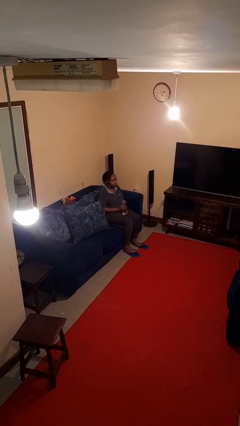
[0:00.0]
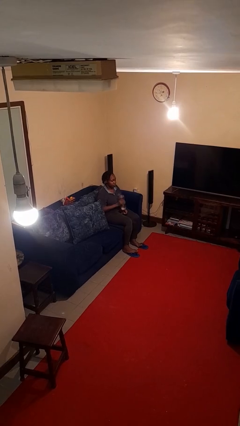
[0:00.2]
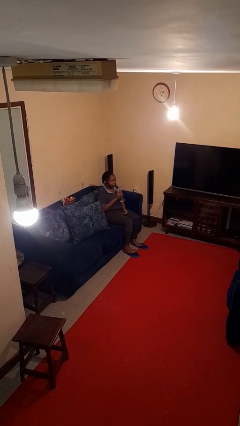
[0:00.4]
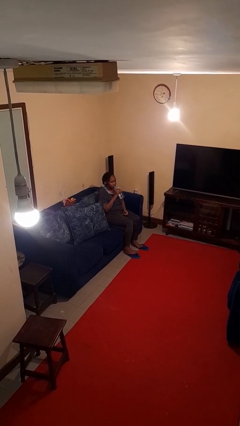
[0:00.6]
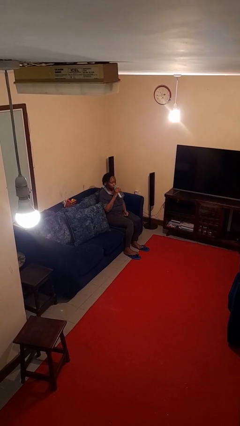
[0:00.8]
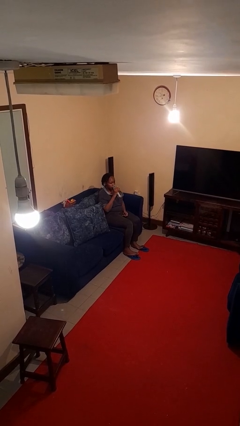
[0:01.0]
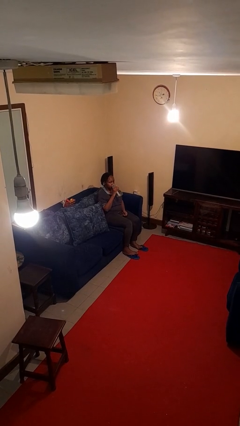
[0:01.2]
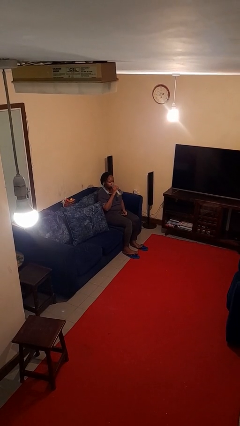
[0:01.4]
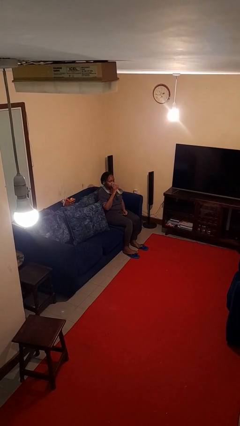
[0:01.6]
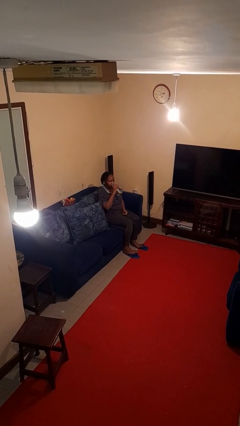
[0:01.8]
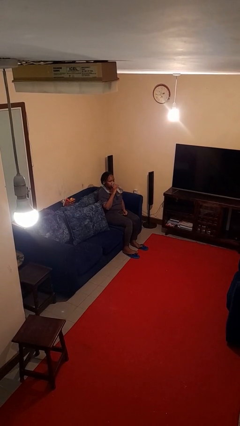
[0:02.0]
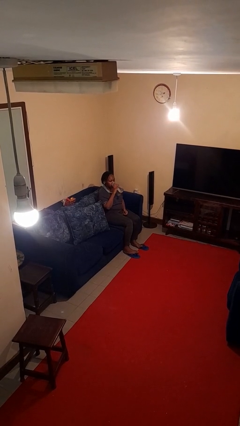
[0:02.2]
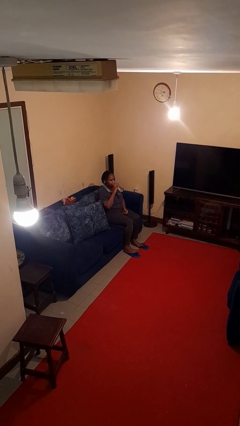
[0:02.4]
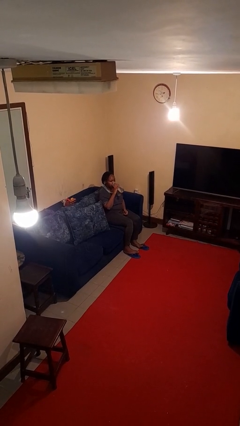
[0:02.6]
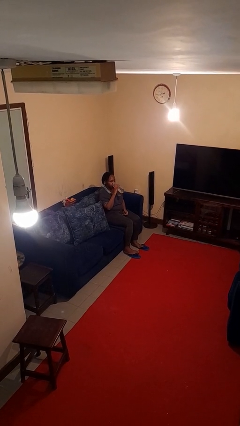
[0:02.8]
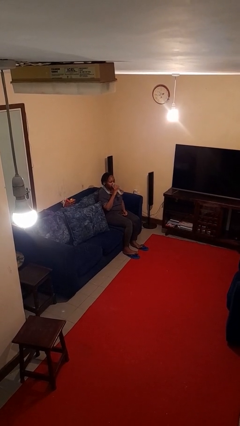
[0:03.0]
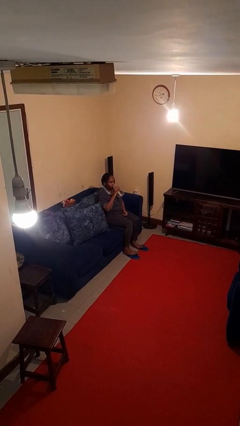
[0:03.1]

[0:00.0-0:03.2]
person drinks from bottle

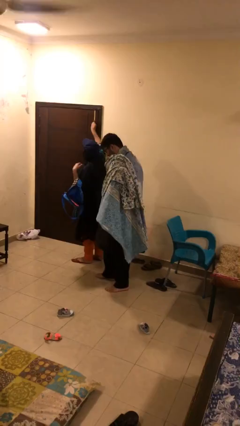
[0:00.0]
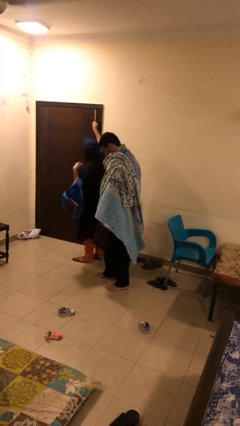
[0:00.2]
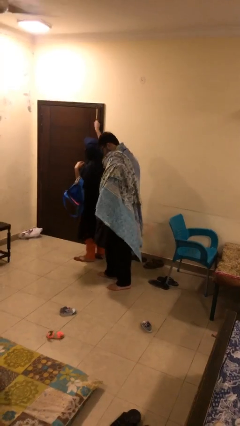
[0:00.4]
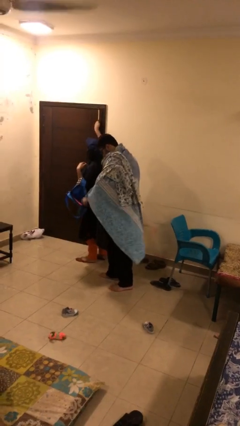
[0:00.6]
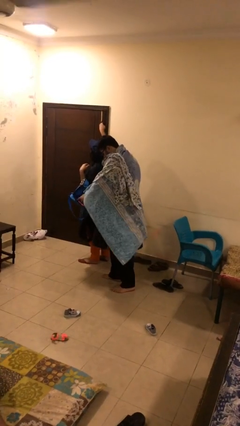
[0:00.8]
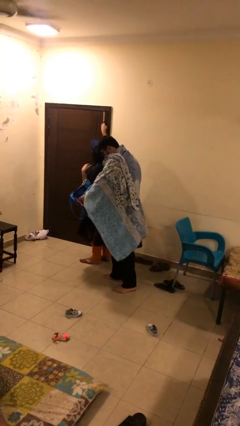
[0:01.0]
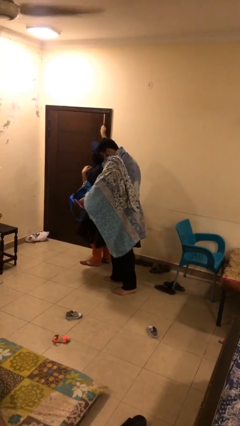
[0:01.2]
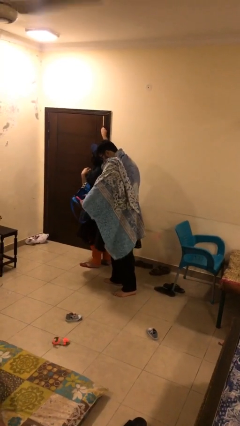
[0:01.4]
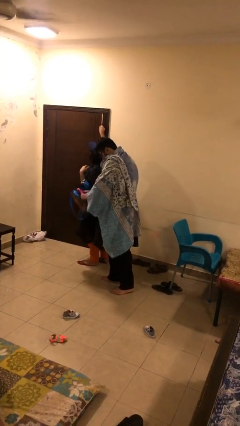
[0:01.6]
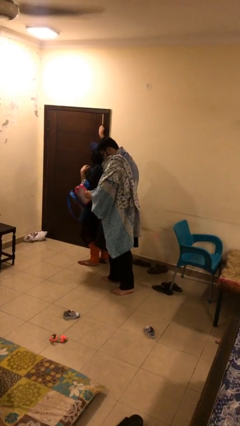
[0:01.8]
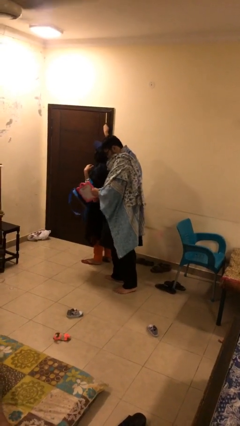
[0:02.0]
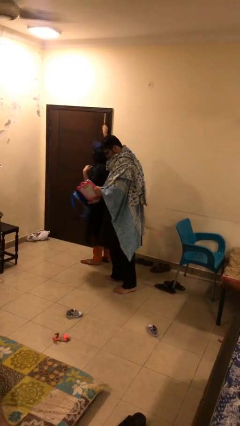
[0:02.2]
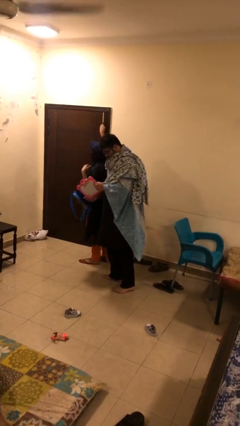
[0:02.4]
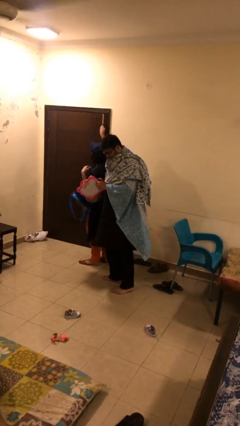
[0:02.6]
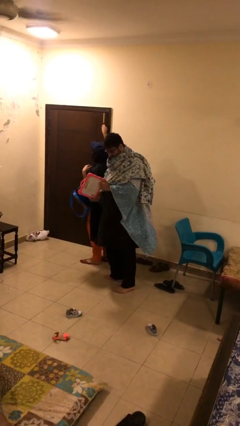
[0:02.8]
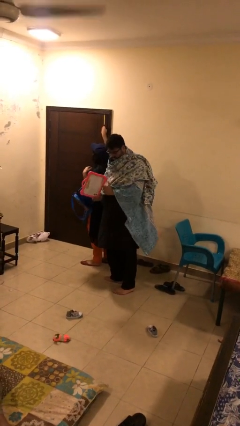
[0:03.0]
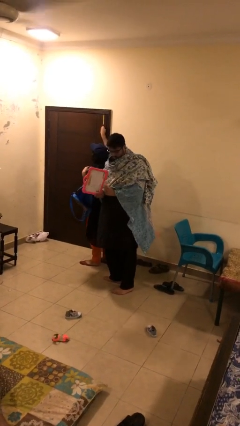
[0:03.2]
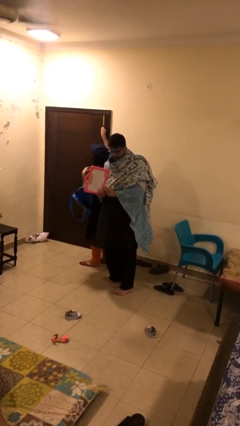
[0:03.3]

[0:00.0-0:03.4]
person steals object from person

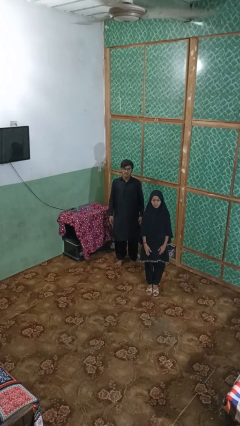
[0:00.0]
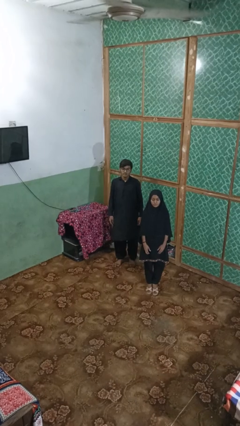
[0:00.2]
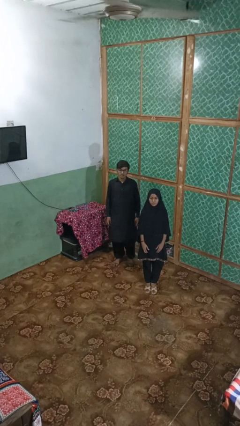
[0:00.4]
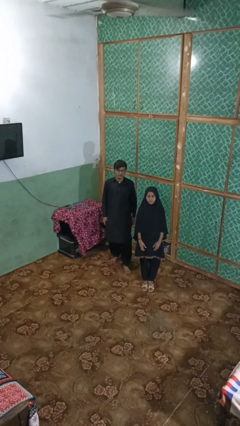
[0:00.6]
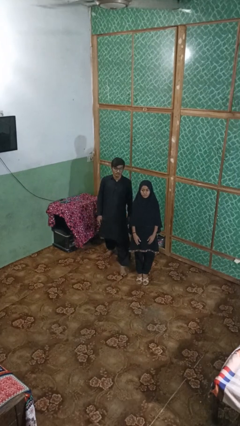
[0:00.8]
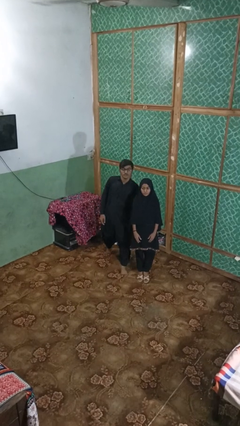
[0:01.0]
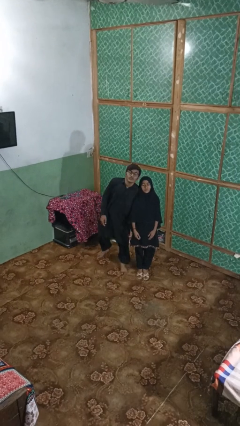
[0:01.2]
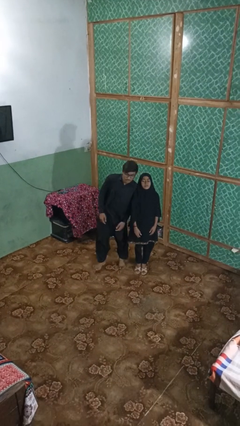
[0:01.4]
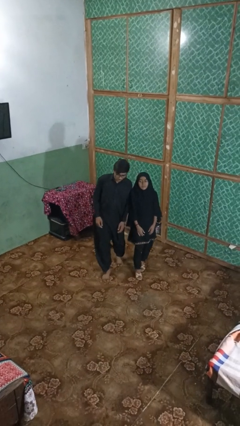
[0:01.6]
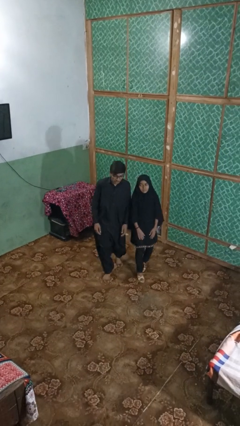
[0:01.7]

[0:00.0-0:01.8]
person shoves person

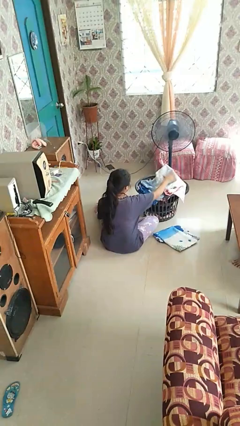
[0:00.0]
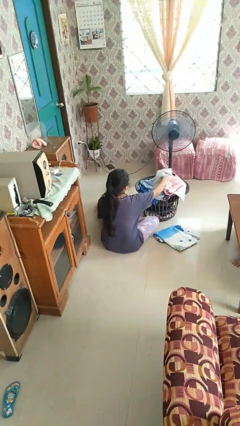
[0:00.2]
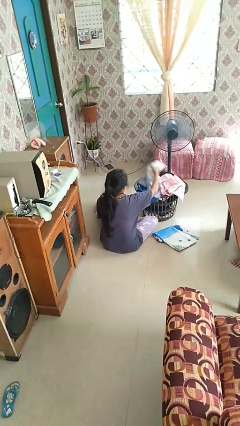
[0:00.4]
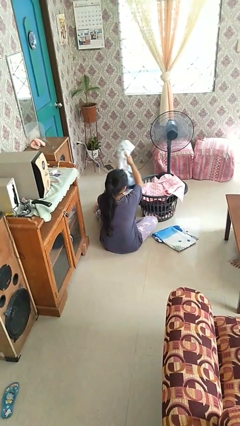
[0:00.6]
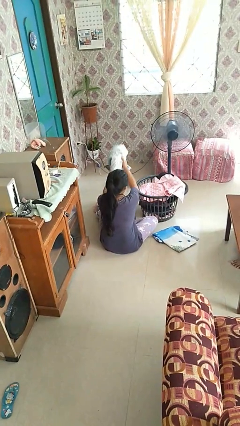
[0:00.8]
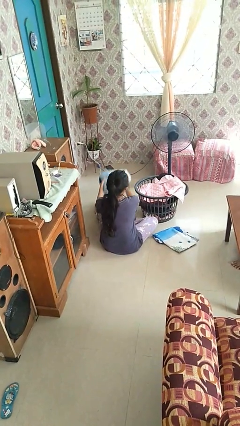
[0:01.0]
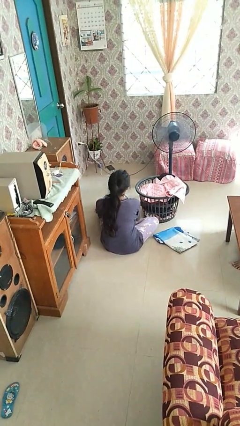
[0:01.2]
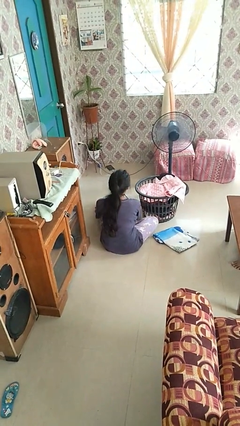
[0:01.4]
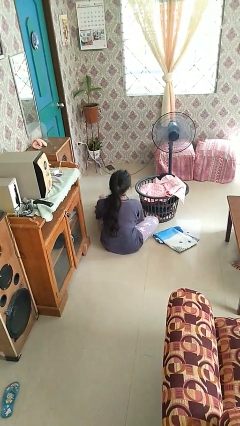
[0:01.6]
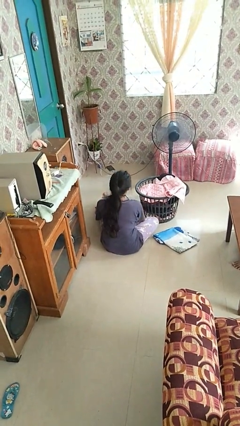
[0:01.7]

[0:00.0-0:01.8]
person takes object from basket

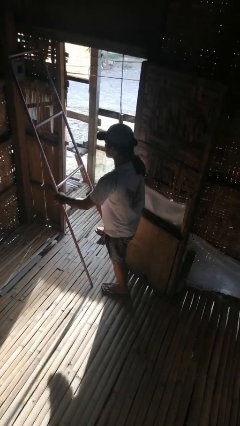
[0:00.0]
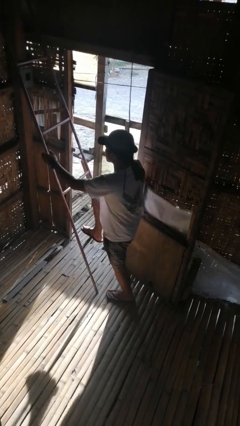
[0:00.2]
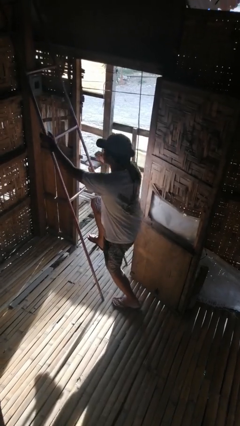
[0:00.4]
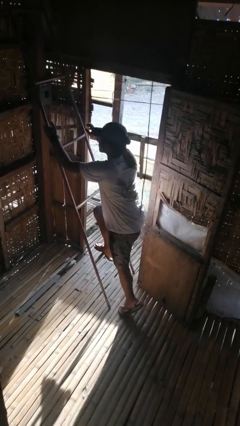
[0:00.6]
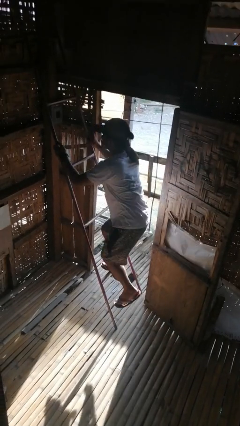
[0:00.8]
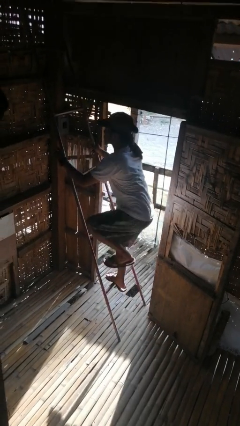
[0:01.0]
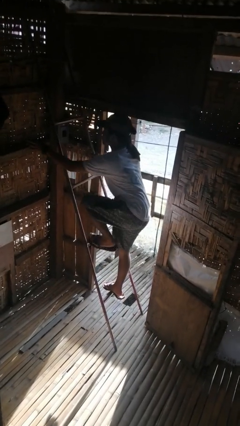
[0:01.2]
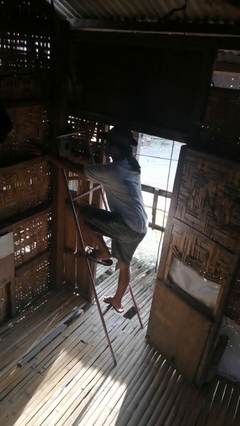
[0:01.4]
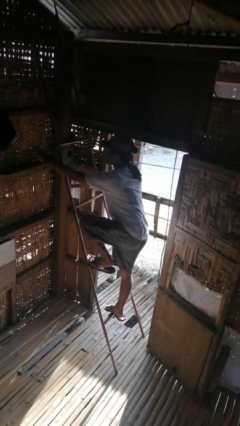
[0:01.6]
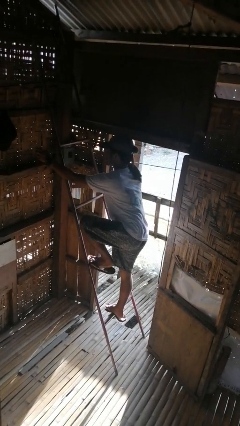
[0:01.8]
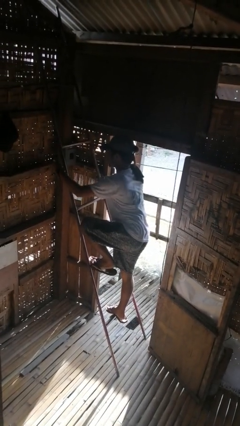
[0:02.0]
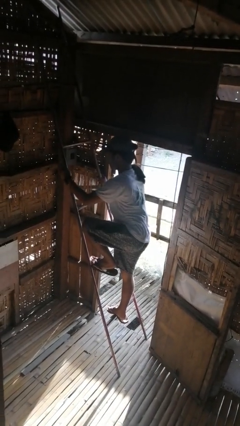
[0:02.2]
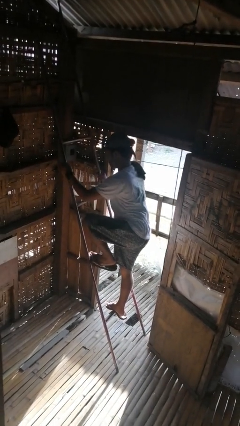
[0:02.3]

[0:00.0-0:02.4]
person climbs up ladder

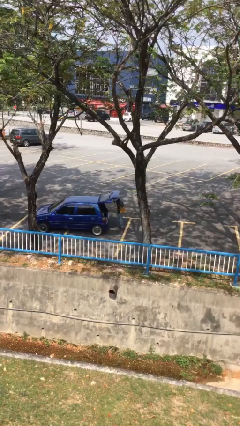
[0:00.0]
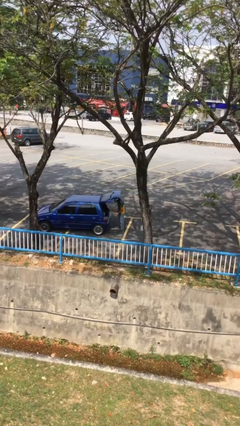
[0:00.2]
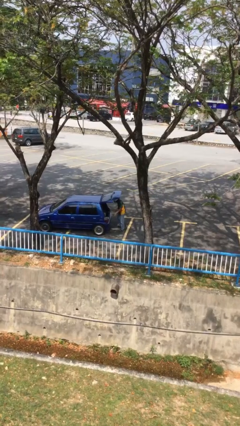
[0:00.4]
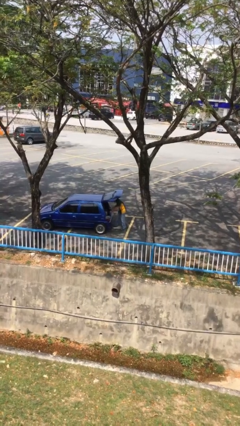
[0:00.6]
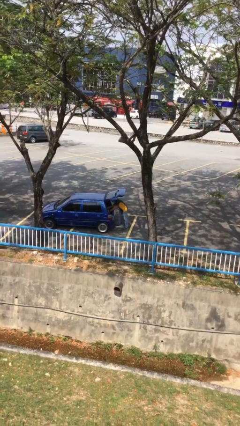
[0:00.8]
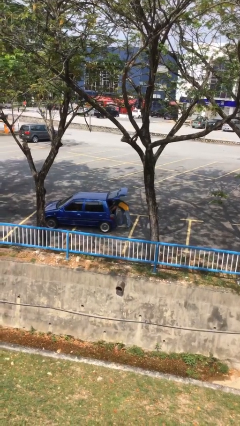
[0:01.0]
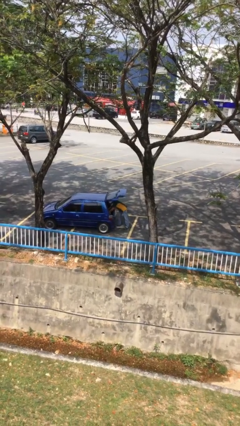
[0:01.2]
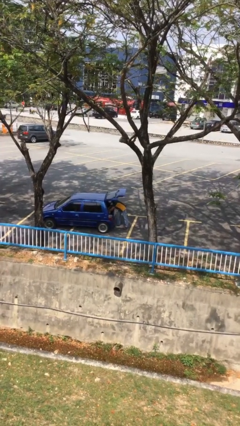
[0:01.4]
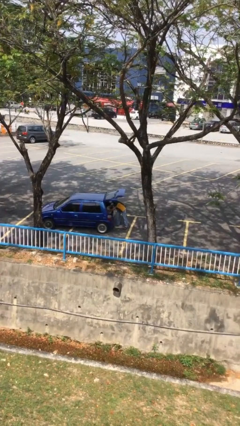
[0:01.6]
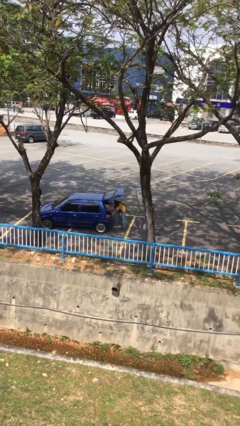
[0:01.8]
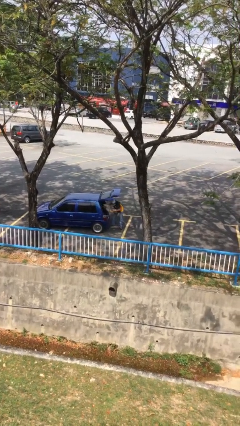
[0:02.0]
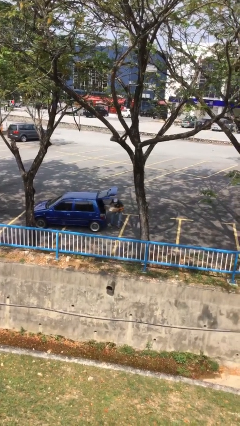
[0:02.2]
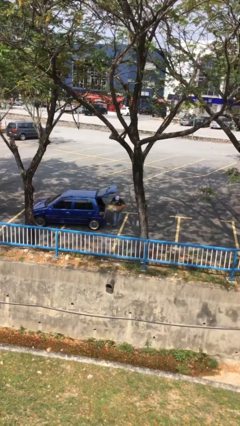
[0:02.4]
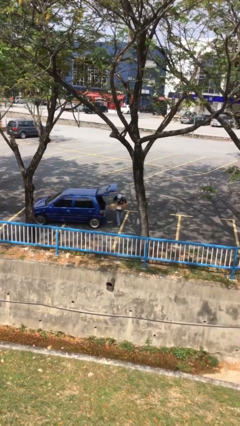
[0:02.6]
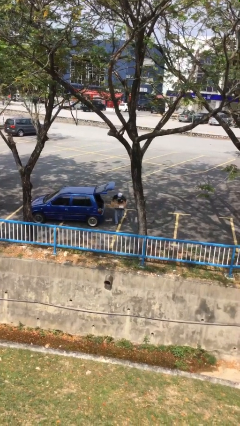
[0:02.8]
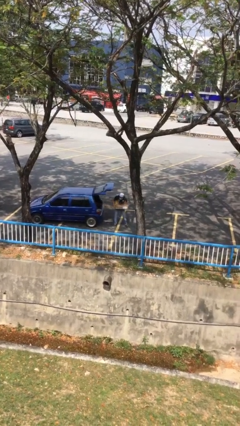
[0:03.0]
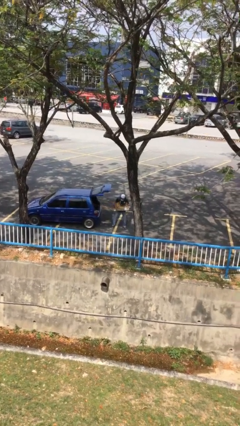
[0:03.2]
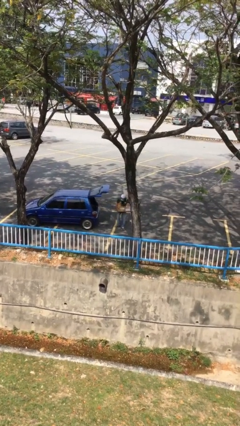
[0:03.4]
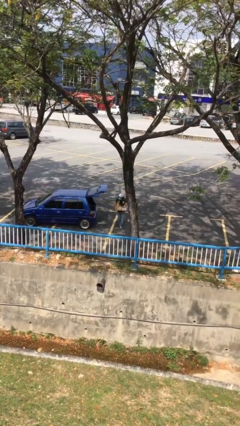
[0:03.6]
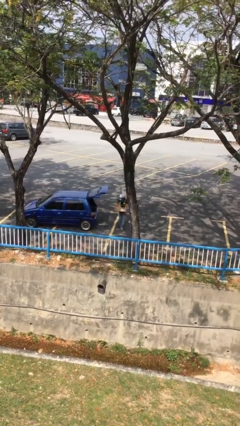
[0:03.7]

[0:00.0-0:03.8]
person unloads car

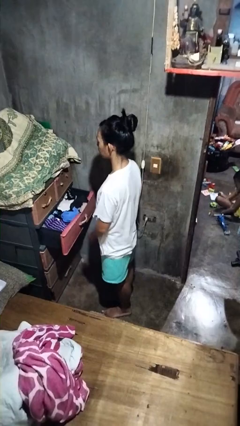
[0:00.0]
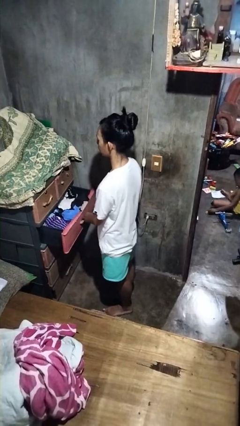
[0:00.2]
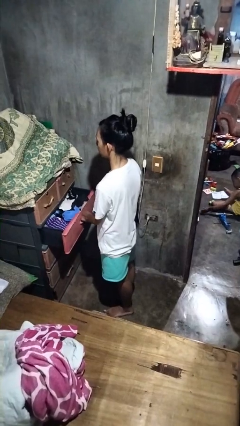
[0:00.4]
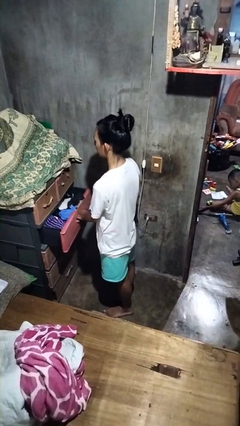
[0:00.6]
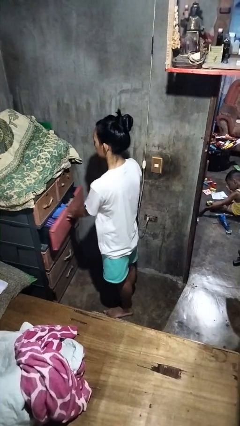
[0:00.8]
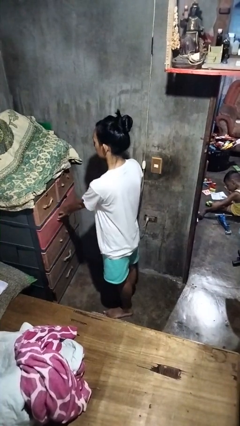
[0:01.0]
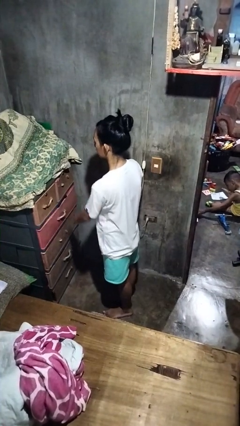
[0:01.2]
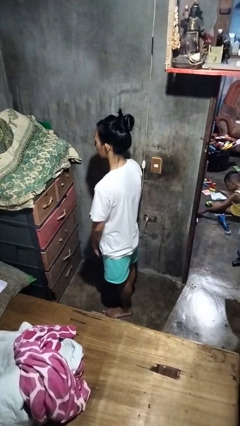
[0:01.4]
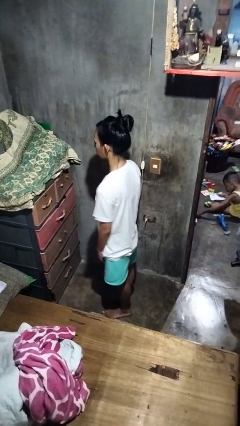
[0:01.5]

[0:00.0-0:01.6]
person closes dresser drawer
